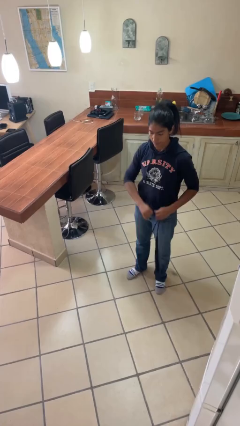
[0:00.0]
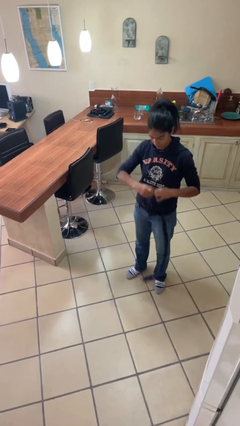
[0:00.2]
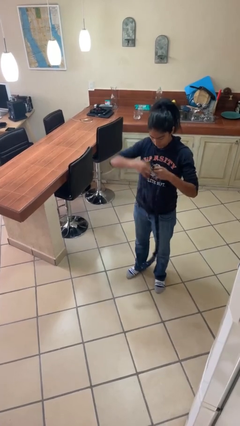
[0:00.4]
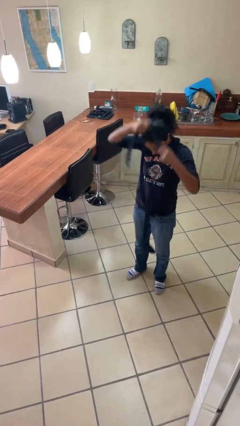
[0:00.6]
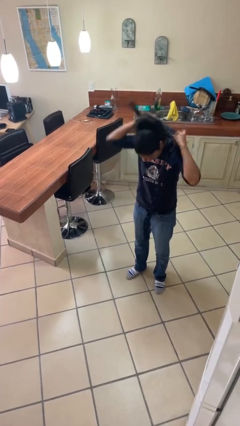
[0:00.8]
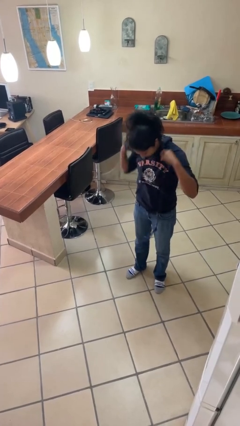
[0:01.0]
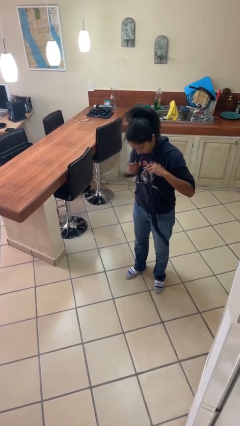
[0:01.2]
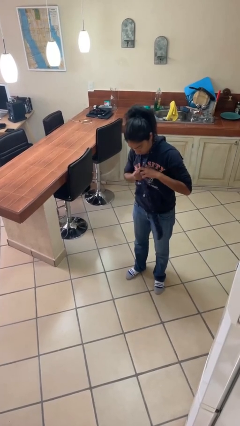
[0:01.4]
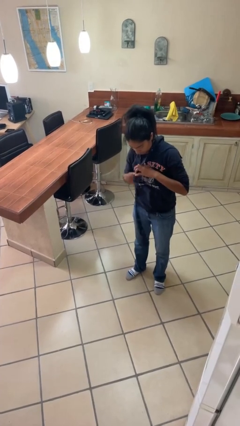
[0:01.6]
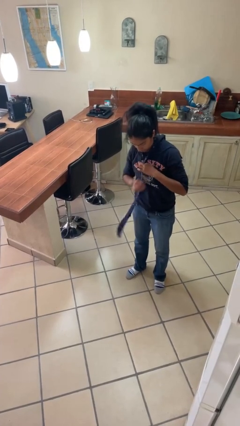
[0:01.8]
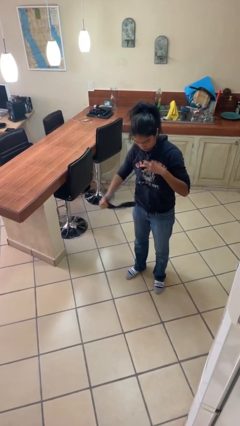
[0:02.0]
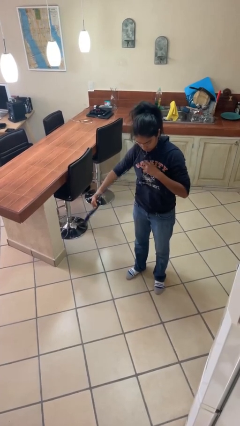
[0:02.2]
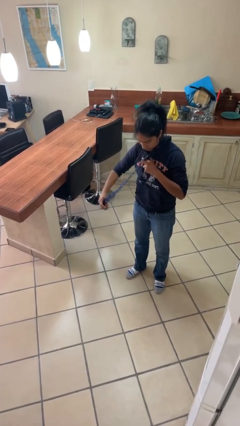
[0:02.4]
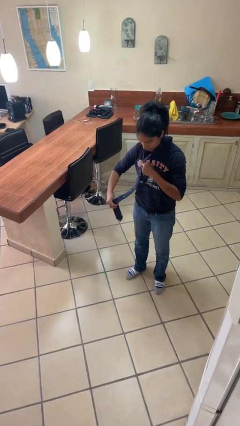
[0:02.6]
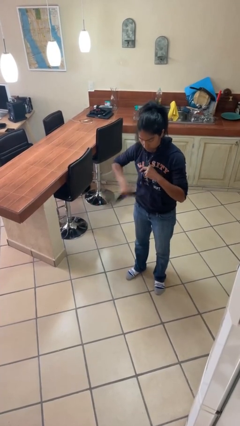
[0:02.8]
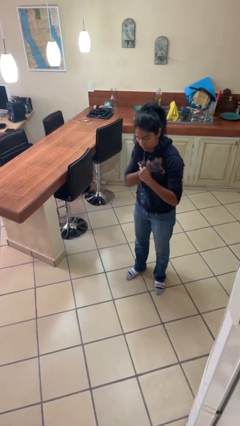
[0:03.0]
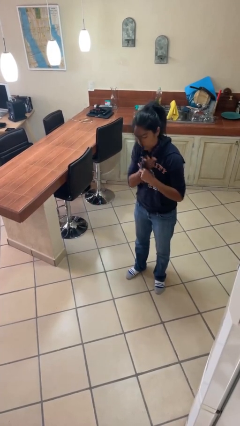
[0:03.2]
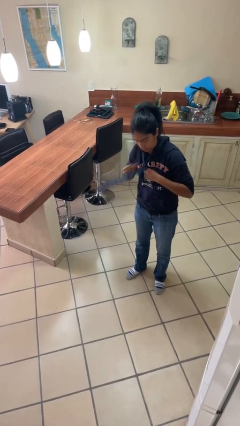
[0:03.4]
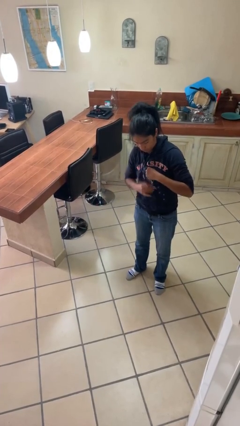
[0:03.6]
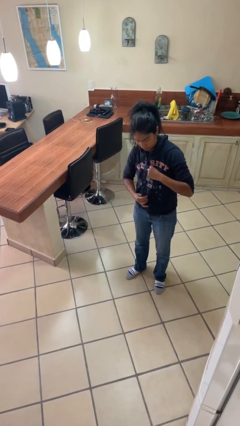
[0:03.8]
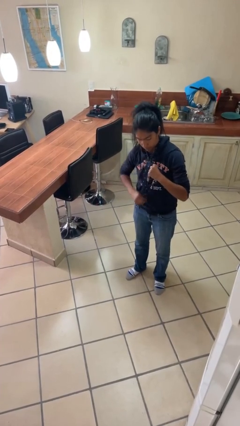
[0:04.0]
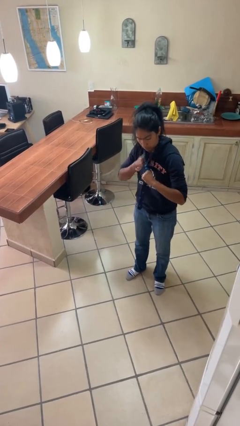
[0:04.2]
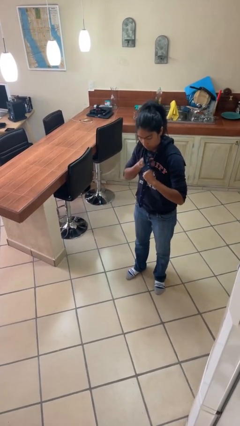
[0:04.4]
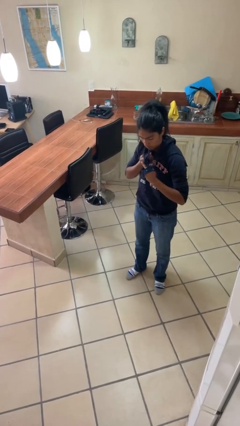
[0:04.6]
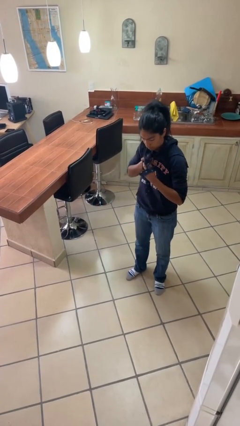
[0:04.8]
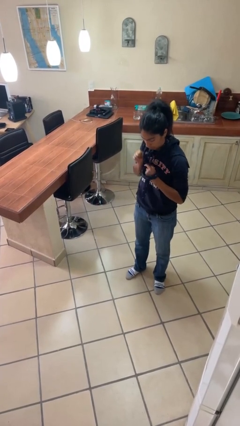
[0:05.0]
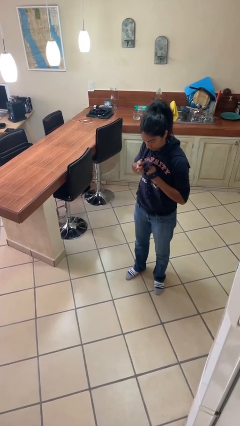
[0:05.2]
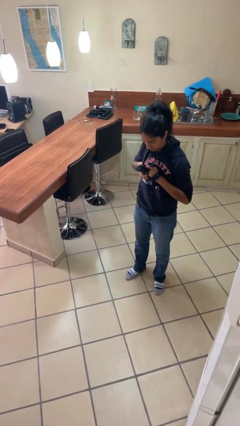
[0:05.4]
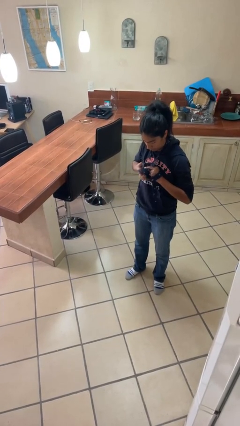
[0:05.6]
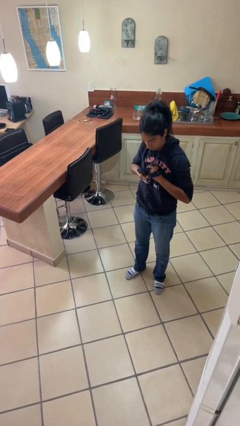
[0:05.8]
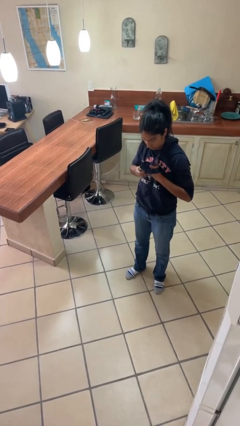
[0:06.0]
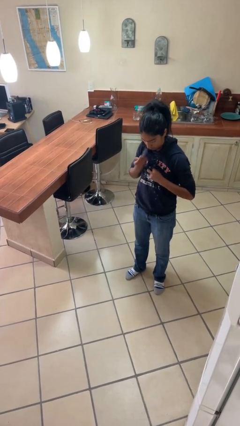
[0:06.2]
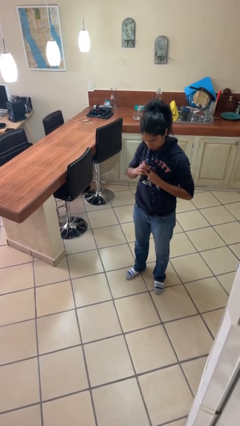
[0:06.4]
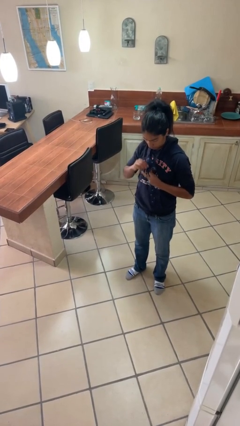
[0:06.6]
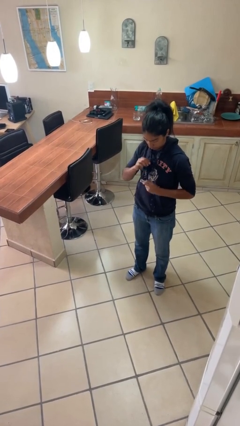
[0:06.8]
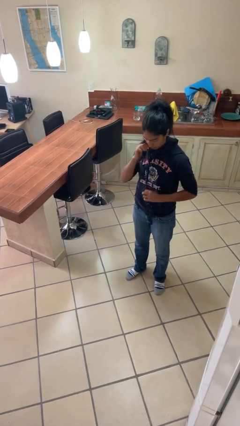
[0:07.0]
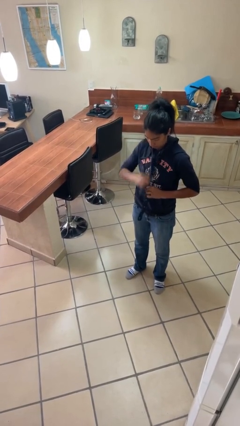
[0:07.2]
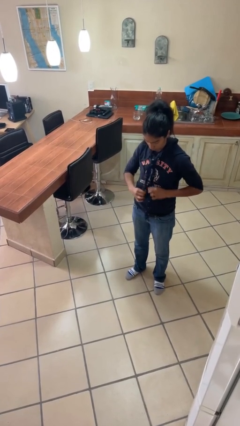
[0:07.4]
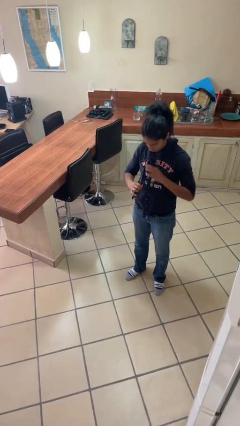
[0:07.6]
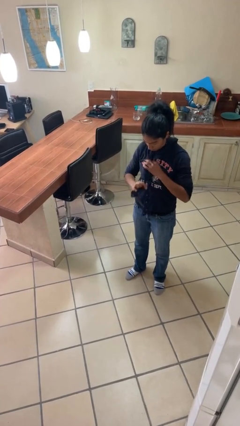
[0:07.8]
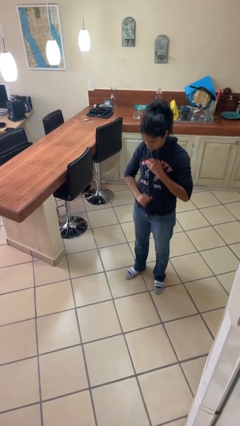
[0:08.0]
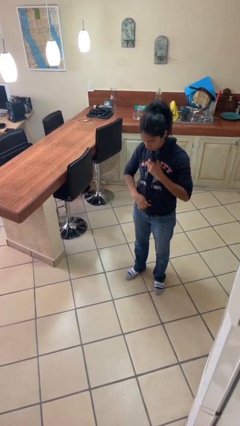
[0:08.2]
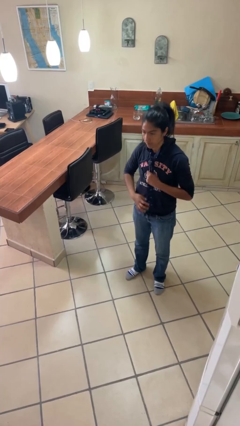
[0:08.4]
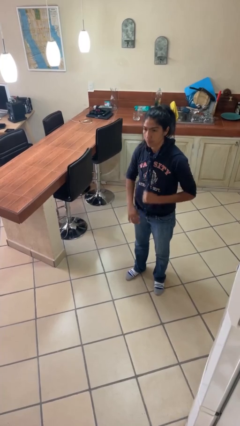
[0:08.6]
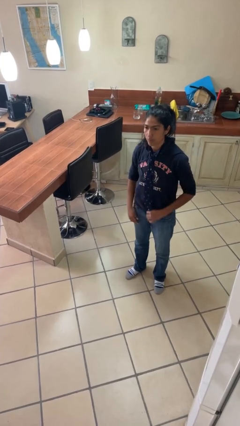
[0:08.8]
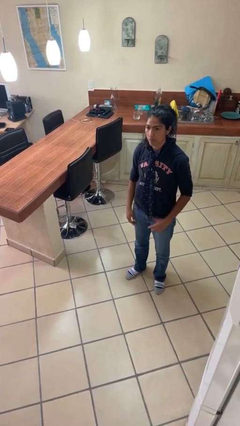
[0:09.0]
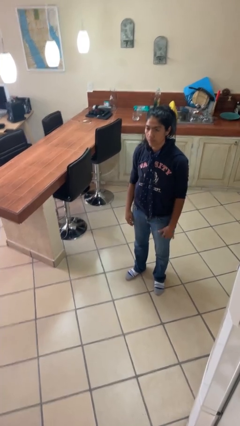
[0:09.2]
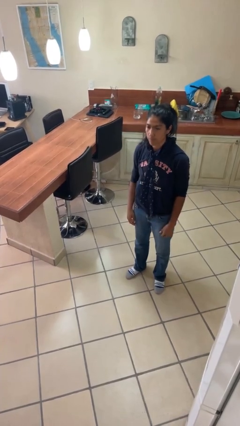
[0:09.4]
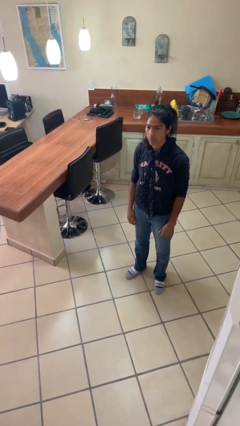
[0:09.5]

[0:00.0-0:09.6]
person puts on necktie

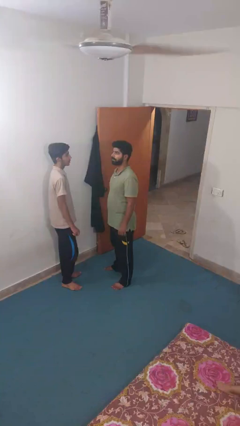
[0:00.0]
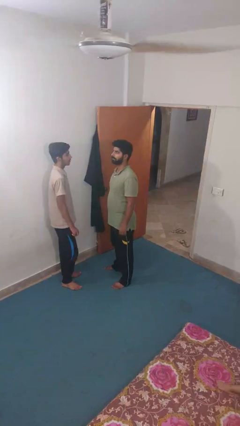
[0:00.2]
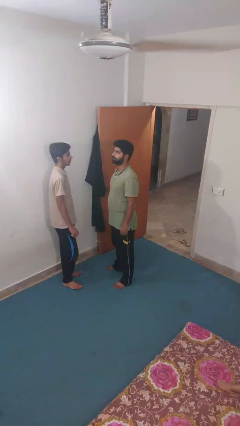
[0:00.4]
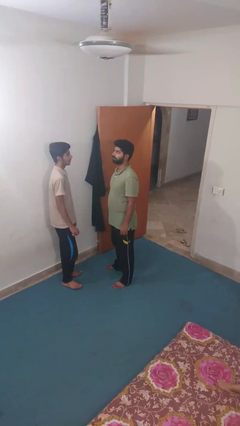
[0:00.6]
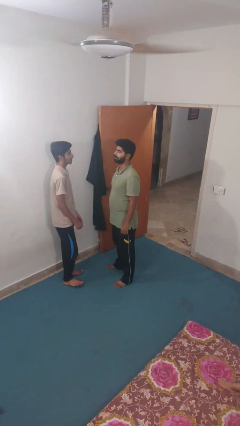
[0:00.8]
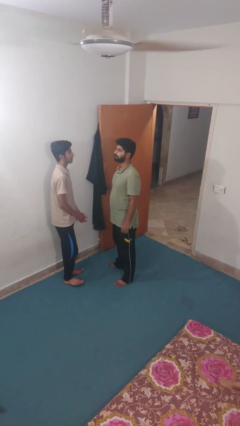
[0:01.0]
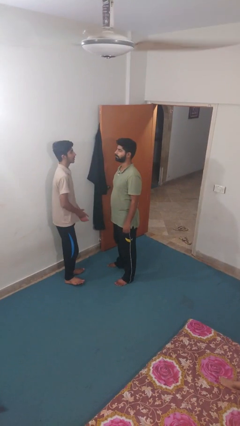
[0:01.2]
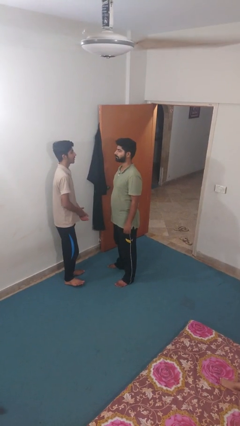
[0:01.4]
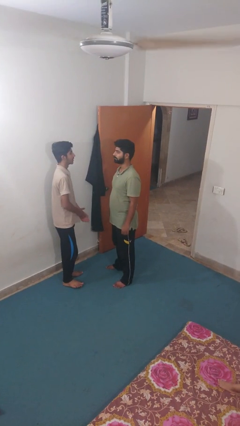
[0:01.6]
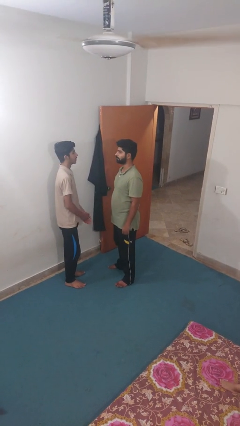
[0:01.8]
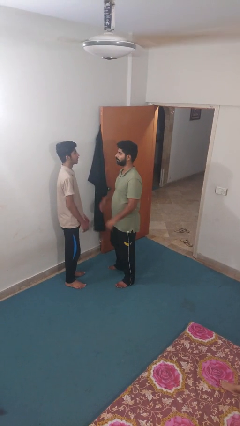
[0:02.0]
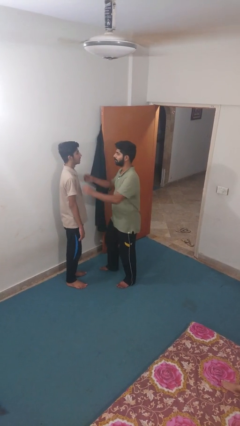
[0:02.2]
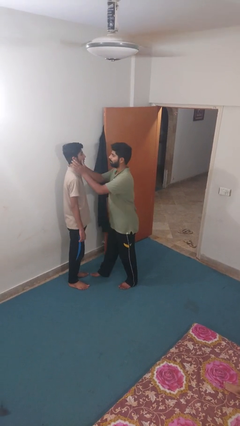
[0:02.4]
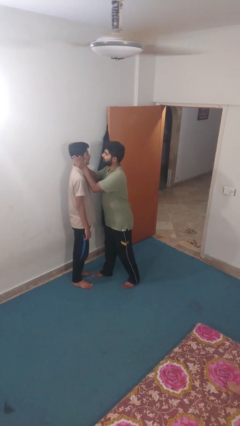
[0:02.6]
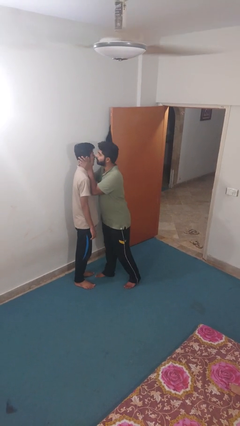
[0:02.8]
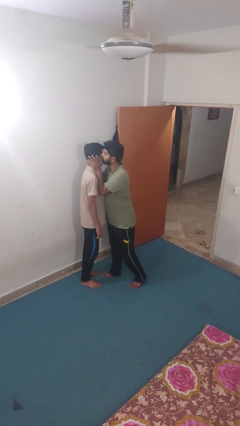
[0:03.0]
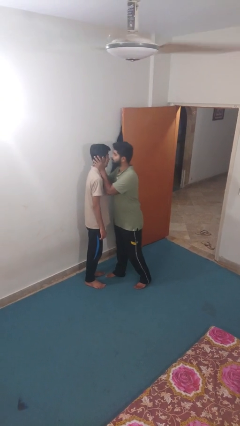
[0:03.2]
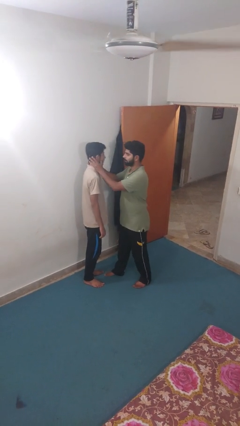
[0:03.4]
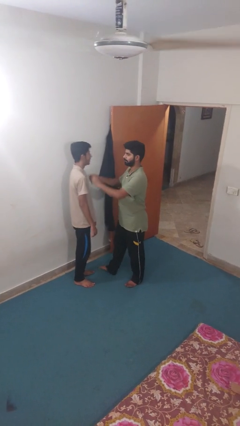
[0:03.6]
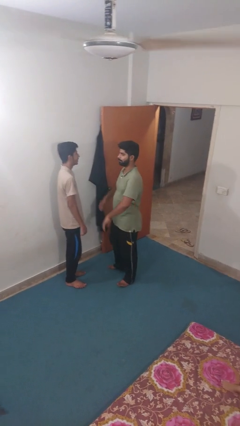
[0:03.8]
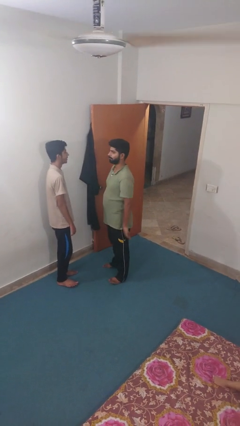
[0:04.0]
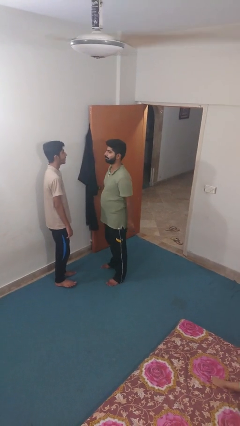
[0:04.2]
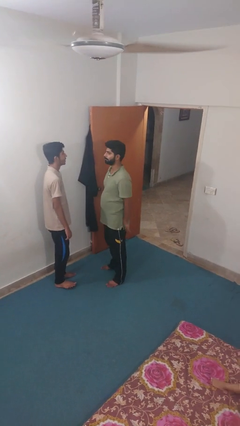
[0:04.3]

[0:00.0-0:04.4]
person kisses cheek of person

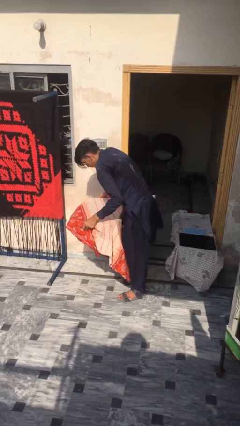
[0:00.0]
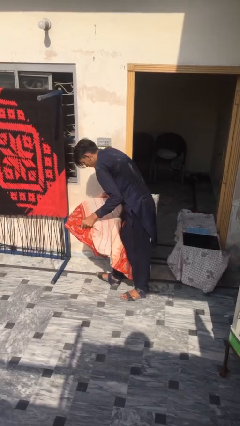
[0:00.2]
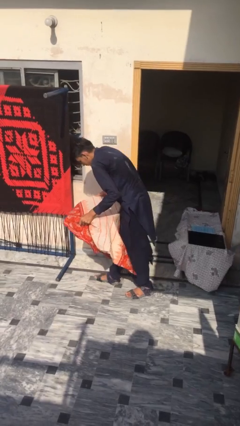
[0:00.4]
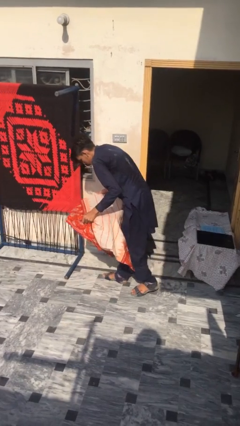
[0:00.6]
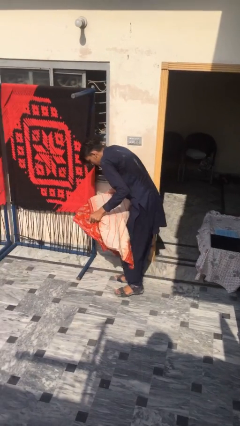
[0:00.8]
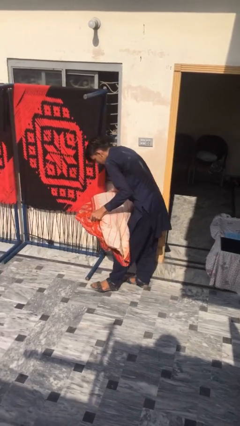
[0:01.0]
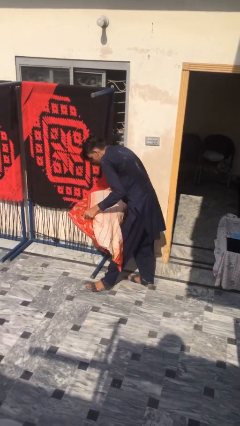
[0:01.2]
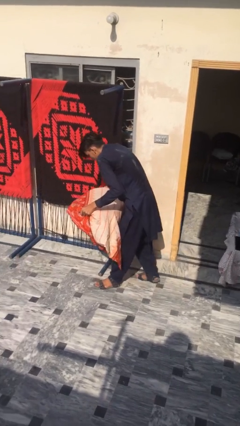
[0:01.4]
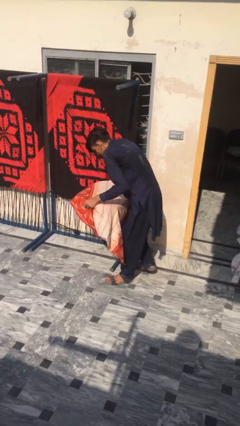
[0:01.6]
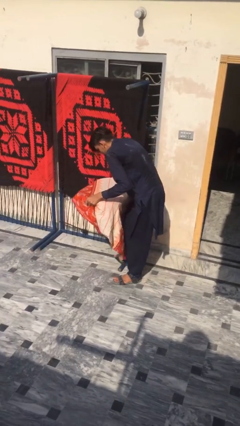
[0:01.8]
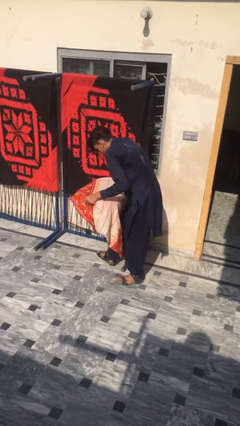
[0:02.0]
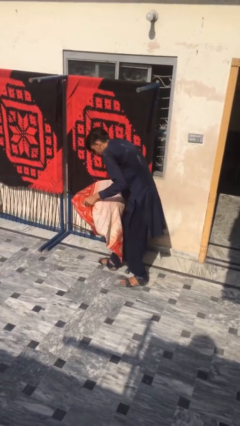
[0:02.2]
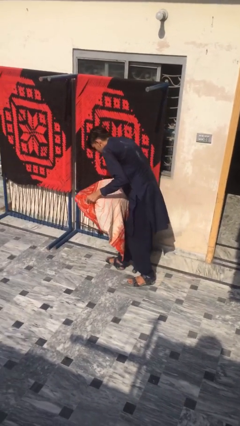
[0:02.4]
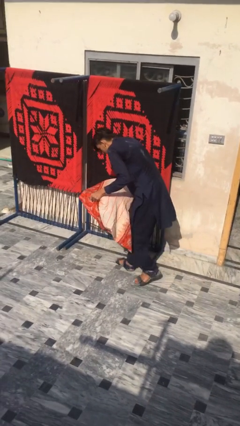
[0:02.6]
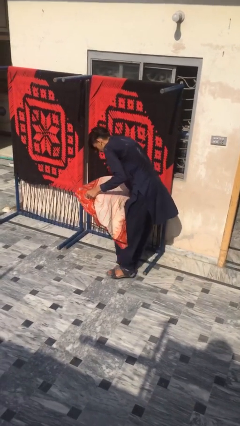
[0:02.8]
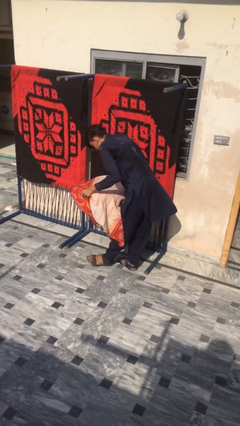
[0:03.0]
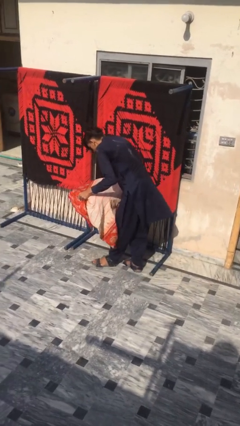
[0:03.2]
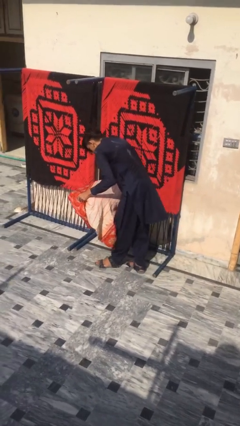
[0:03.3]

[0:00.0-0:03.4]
person carries heavy object

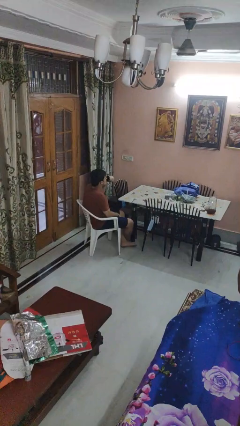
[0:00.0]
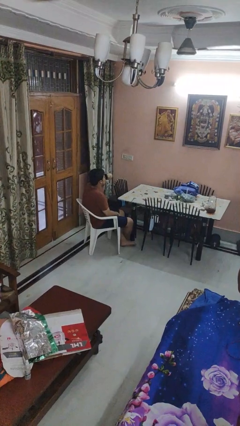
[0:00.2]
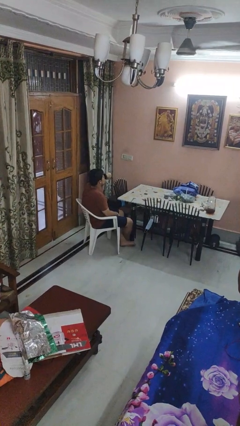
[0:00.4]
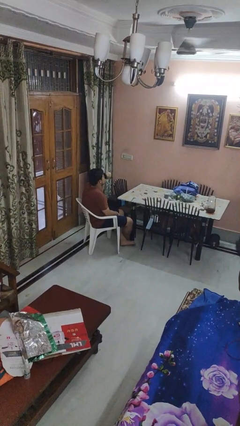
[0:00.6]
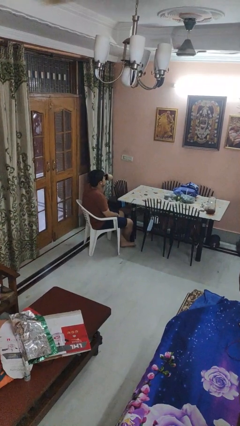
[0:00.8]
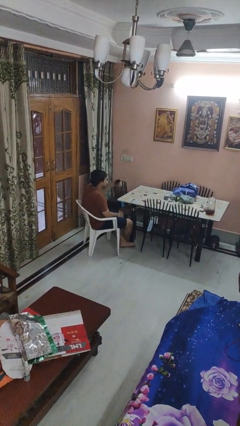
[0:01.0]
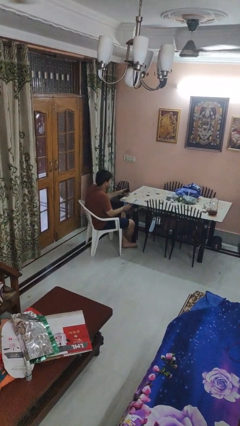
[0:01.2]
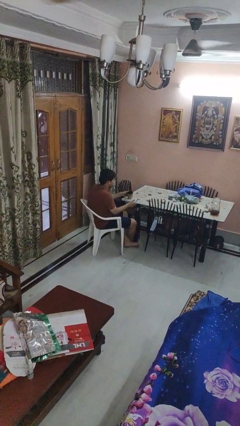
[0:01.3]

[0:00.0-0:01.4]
person drinks from mug
